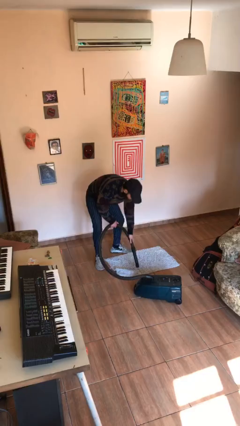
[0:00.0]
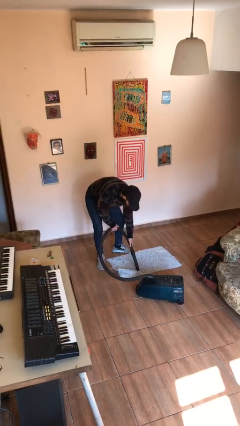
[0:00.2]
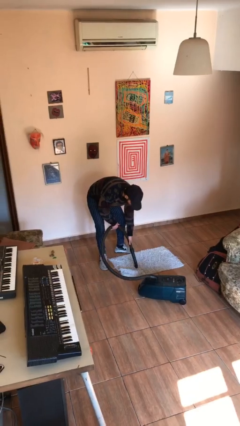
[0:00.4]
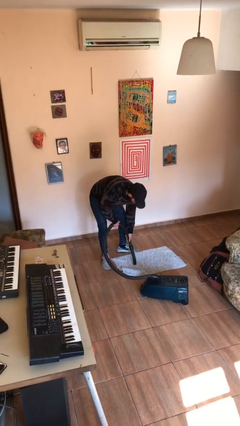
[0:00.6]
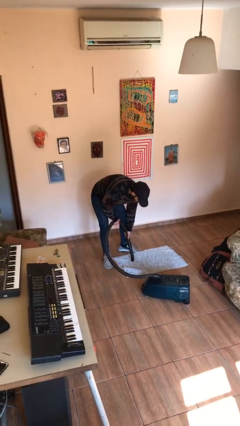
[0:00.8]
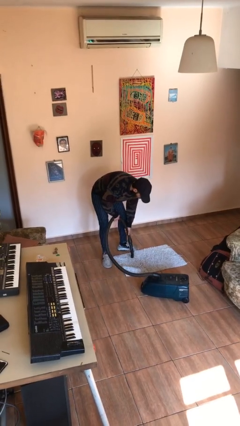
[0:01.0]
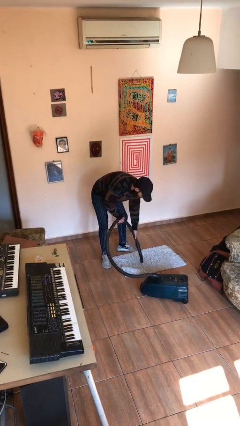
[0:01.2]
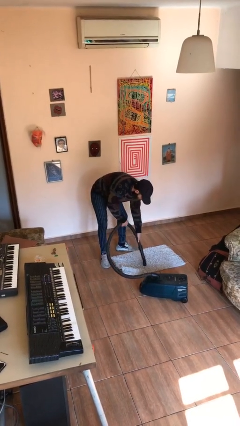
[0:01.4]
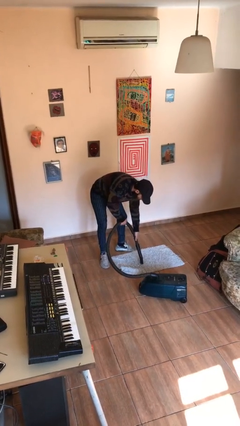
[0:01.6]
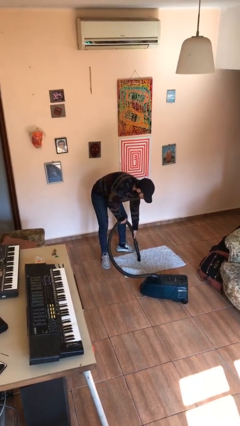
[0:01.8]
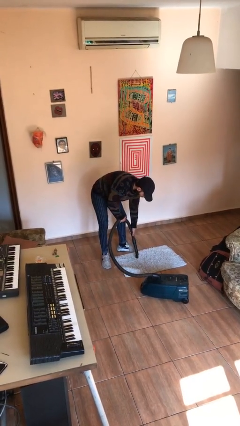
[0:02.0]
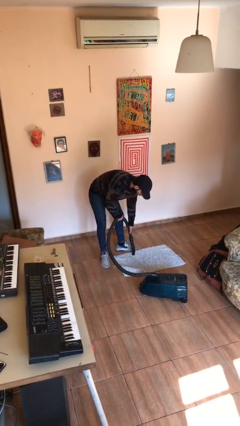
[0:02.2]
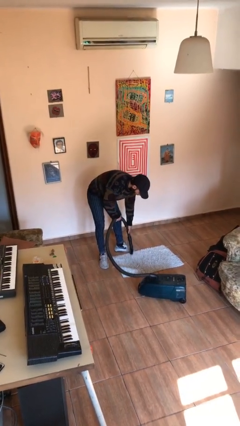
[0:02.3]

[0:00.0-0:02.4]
person vacuums carpet

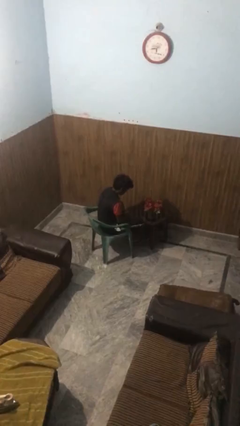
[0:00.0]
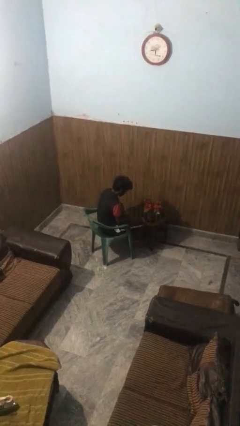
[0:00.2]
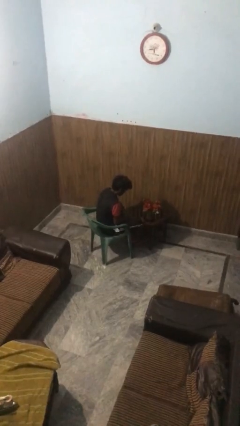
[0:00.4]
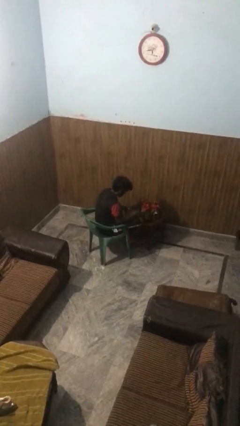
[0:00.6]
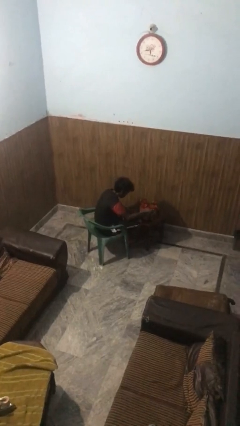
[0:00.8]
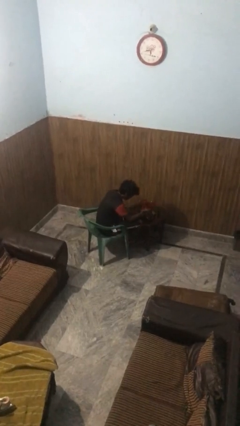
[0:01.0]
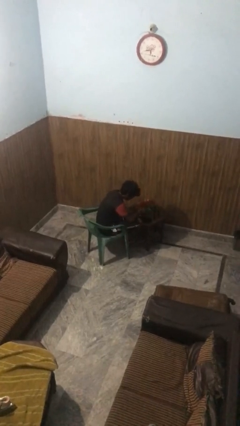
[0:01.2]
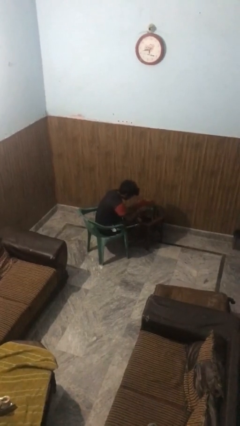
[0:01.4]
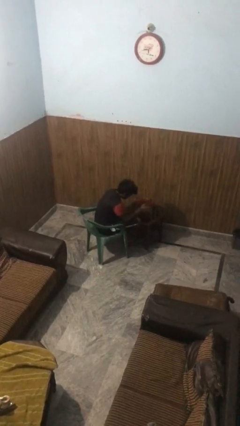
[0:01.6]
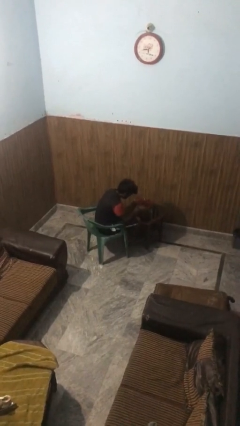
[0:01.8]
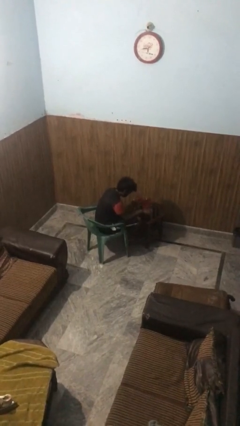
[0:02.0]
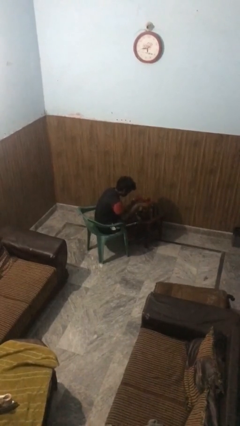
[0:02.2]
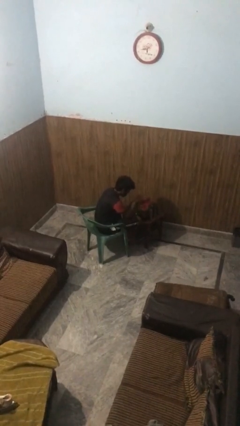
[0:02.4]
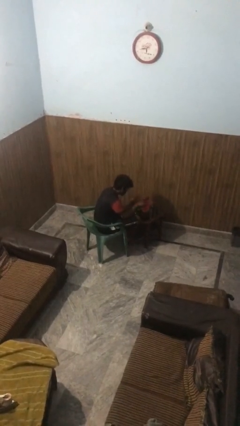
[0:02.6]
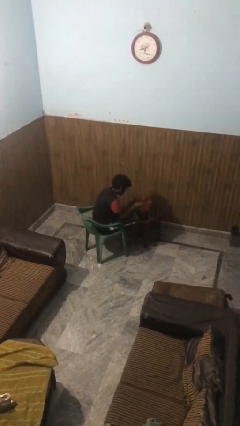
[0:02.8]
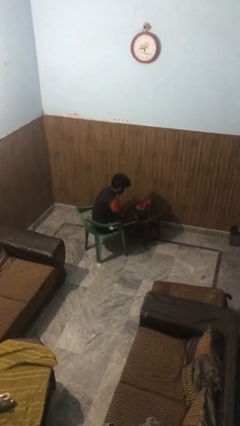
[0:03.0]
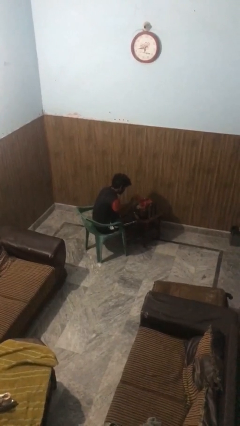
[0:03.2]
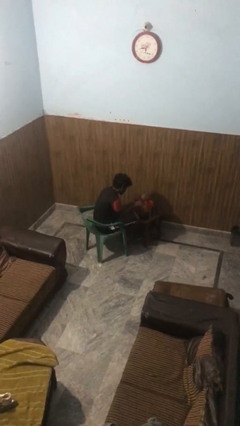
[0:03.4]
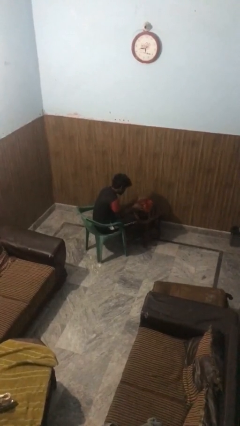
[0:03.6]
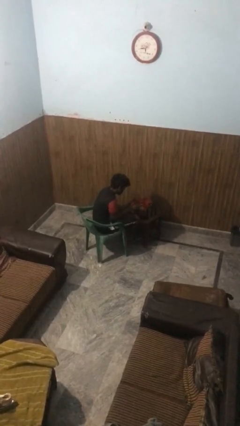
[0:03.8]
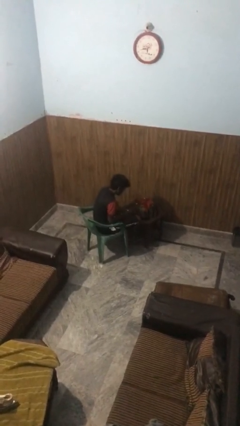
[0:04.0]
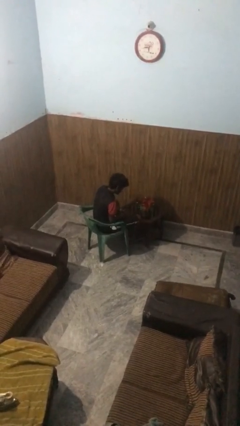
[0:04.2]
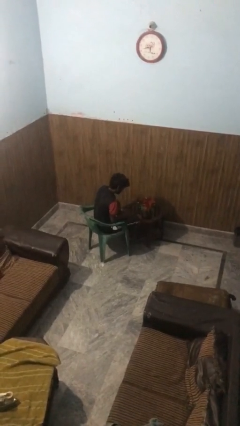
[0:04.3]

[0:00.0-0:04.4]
person arranges flowers in vase

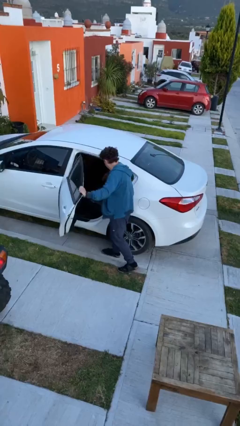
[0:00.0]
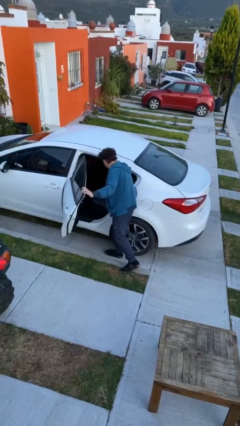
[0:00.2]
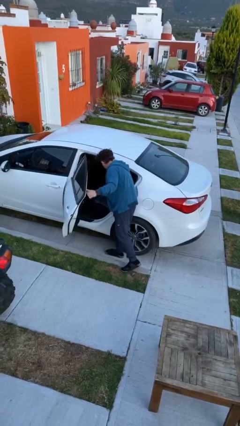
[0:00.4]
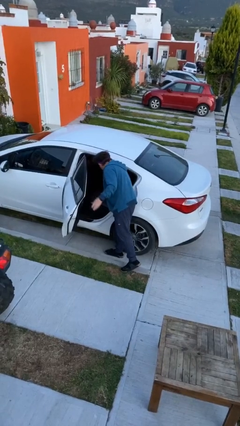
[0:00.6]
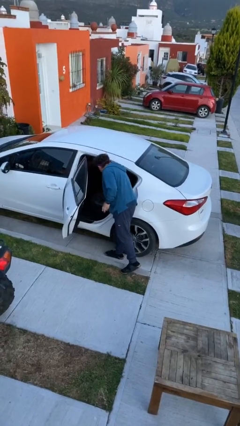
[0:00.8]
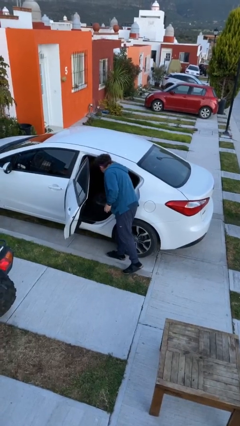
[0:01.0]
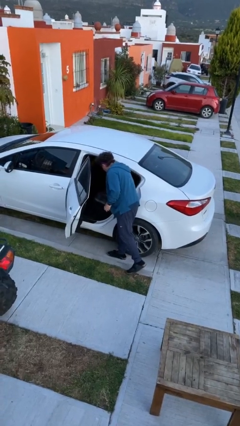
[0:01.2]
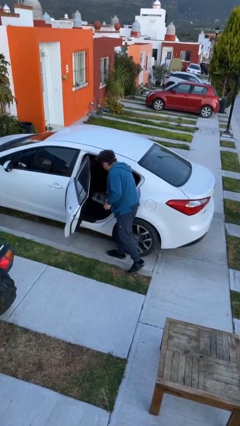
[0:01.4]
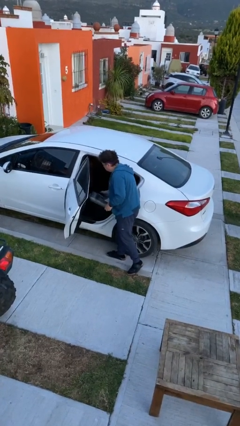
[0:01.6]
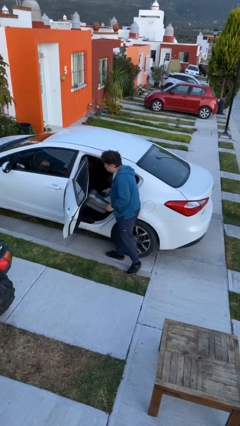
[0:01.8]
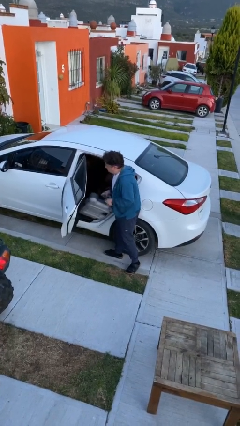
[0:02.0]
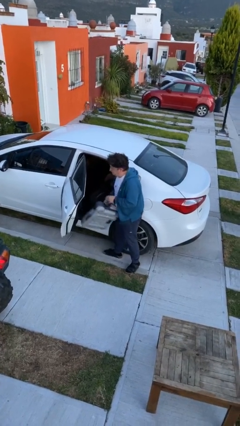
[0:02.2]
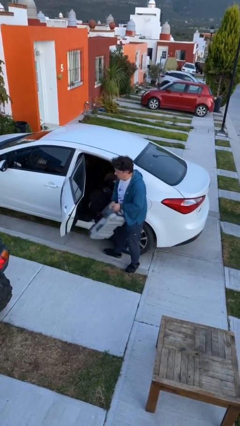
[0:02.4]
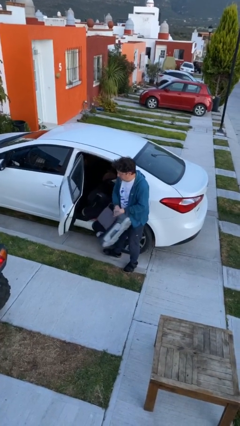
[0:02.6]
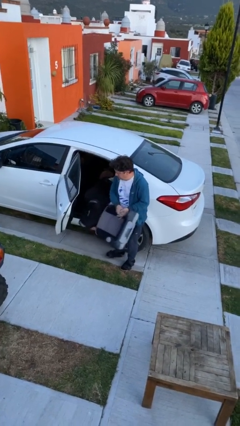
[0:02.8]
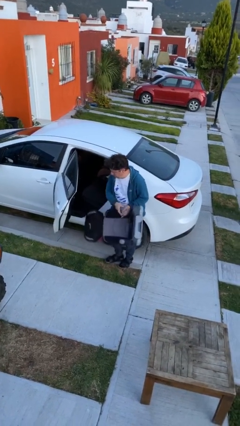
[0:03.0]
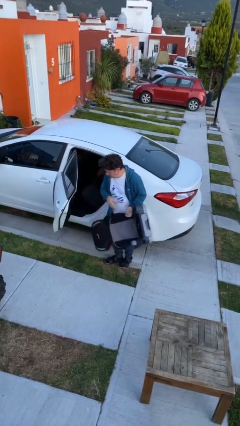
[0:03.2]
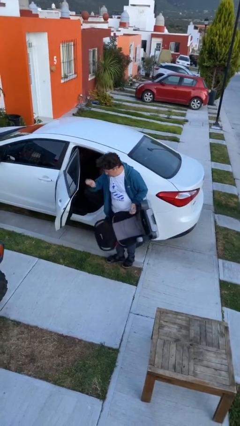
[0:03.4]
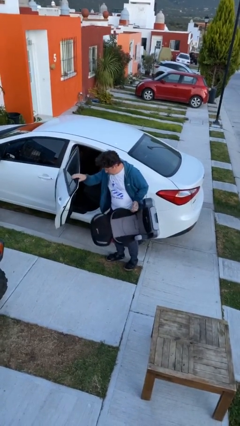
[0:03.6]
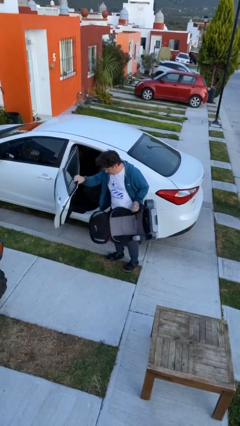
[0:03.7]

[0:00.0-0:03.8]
person unloads car

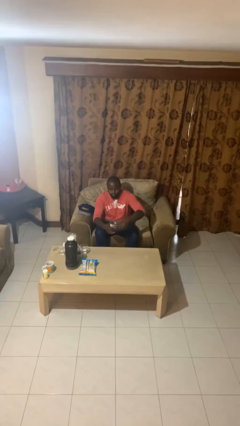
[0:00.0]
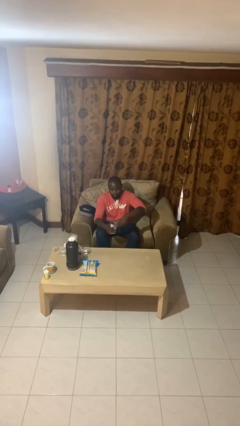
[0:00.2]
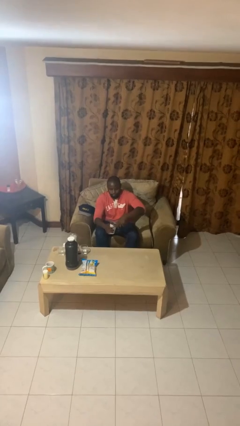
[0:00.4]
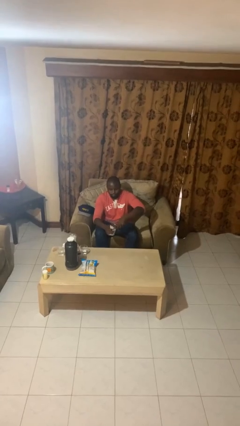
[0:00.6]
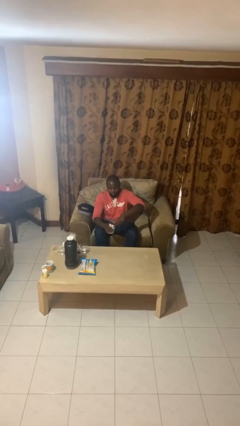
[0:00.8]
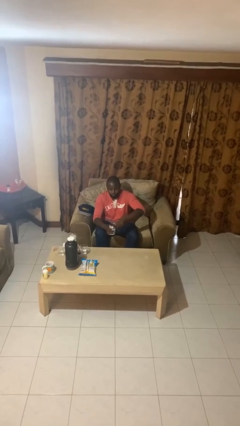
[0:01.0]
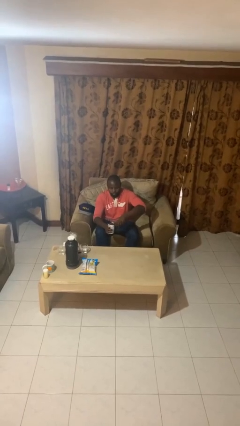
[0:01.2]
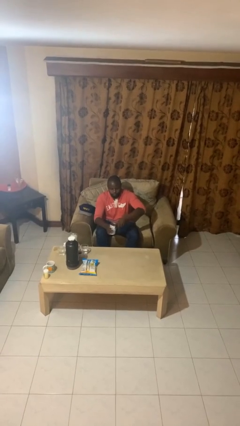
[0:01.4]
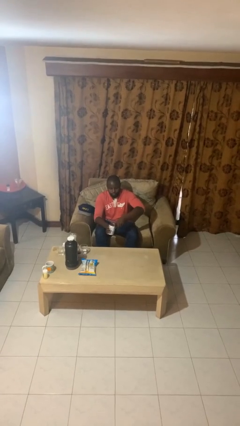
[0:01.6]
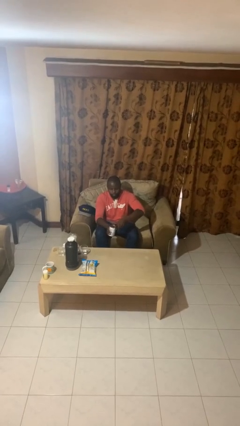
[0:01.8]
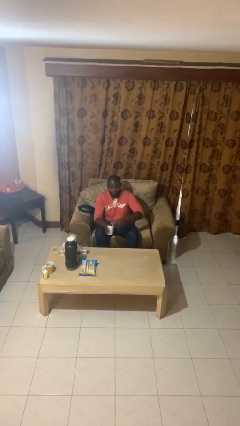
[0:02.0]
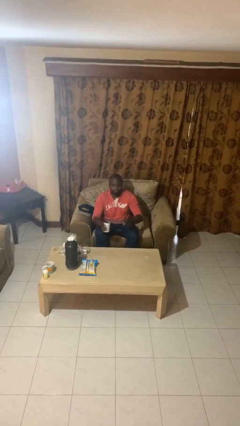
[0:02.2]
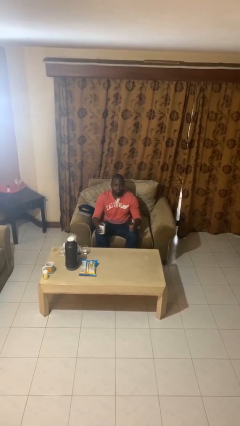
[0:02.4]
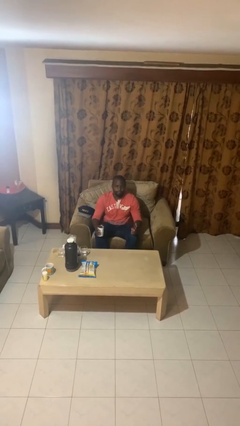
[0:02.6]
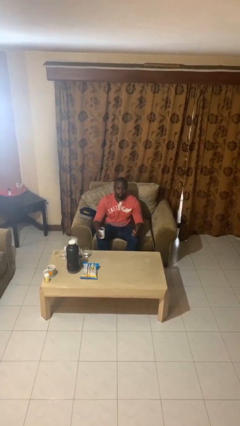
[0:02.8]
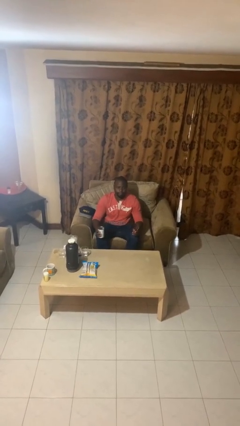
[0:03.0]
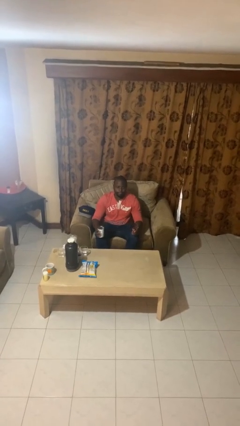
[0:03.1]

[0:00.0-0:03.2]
person opens can with can opener

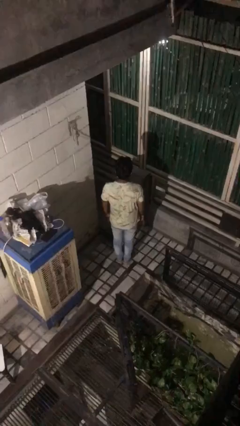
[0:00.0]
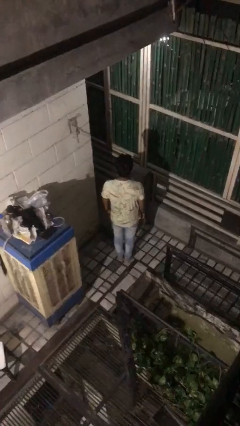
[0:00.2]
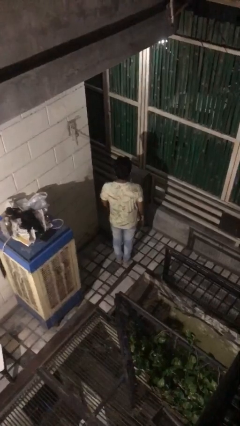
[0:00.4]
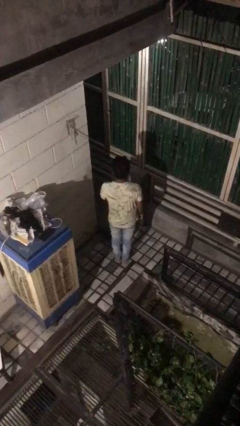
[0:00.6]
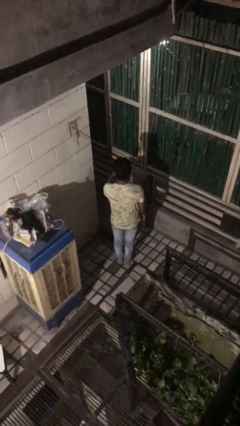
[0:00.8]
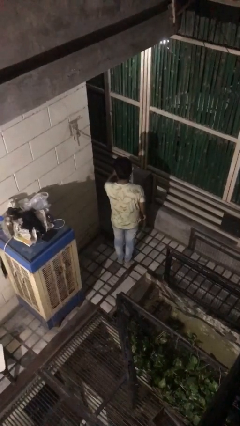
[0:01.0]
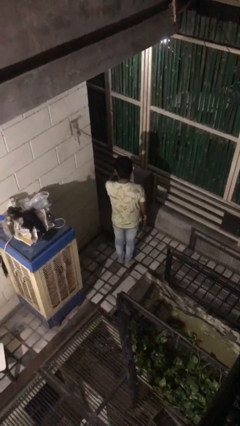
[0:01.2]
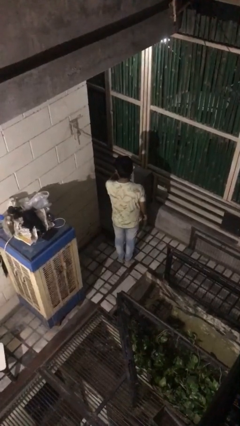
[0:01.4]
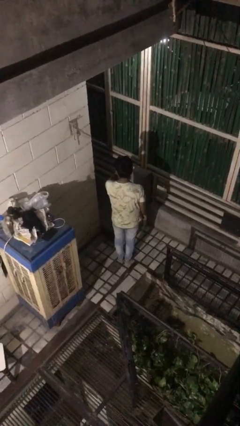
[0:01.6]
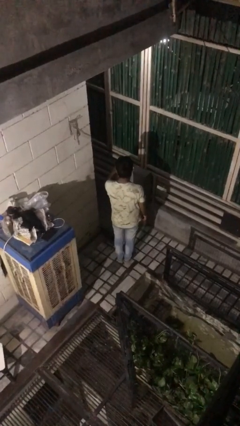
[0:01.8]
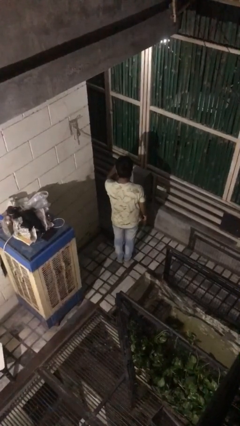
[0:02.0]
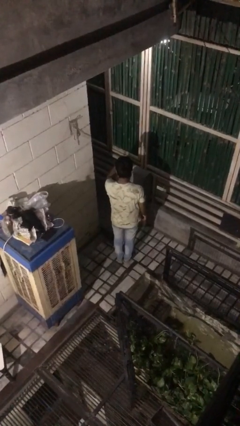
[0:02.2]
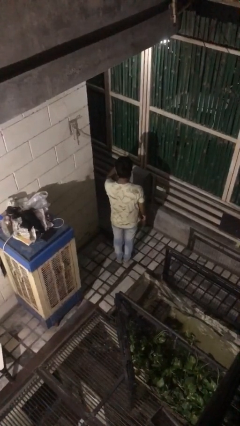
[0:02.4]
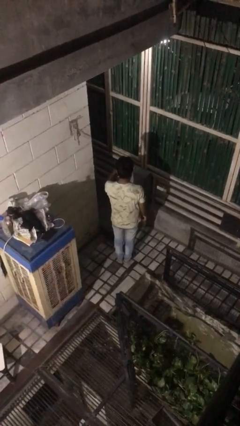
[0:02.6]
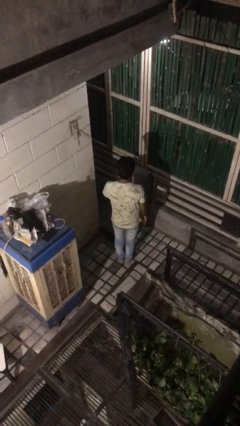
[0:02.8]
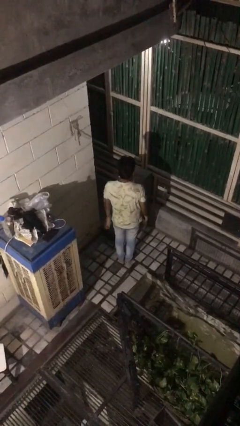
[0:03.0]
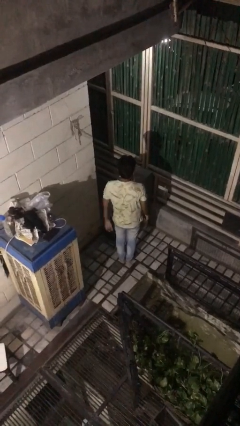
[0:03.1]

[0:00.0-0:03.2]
person gestures watch closely

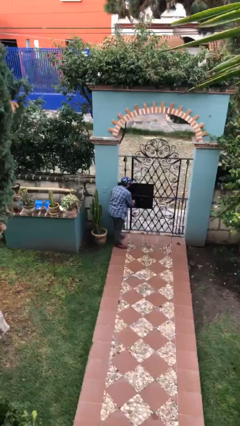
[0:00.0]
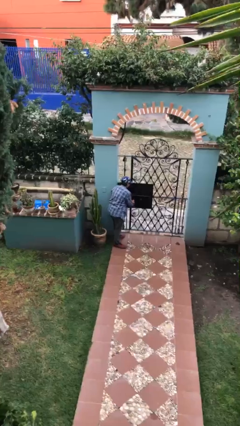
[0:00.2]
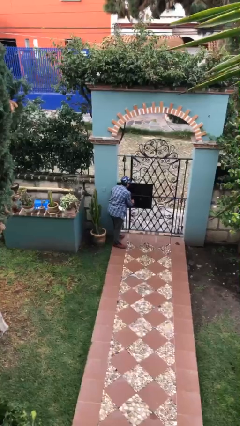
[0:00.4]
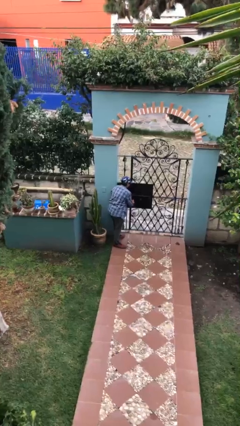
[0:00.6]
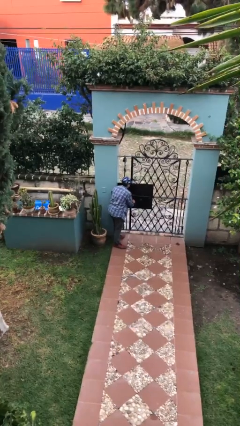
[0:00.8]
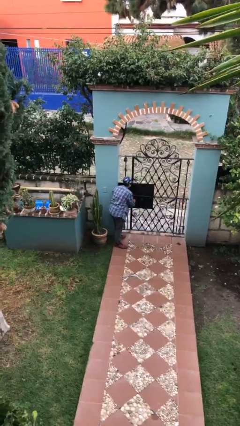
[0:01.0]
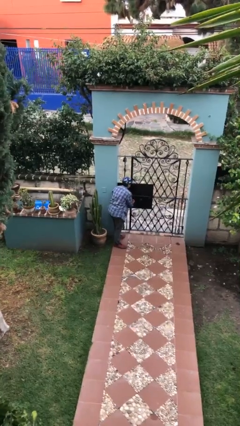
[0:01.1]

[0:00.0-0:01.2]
person unlocks door with keys
